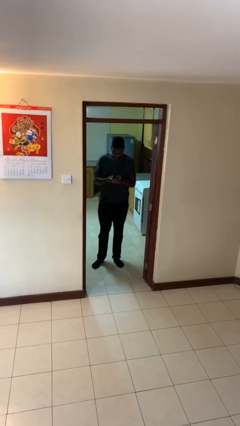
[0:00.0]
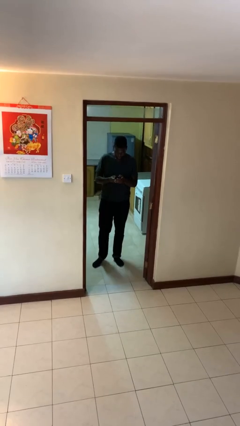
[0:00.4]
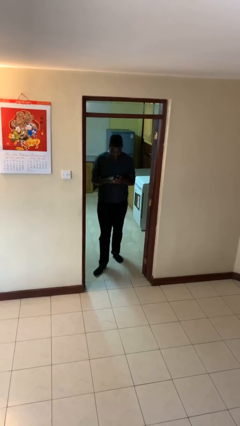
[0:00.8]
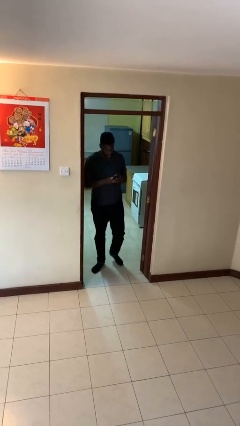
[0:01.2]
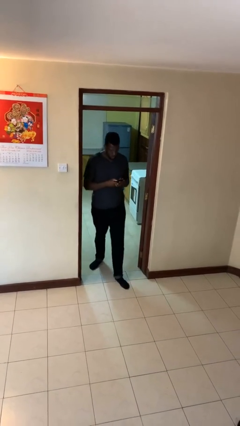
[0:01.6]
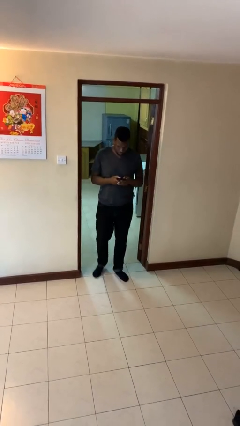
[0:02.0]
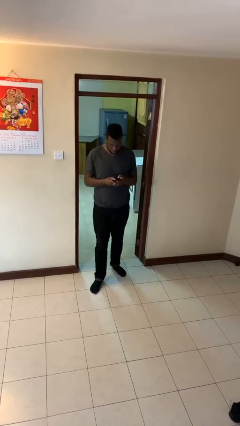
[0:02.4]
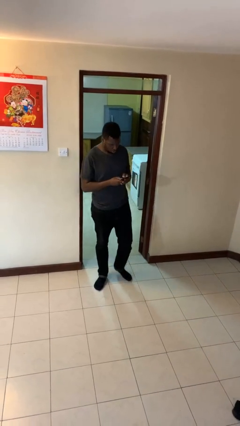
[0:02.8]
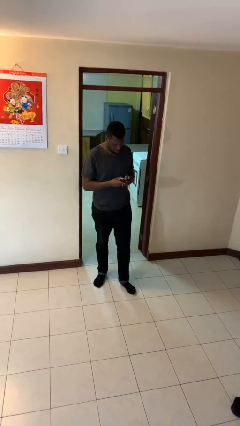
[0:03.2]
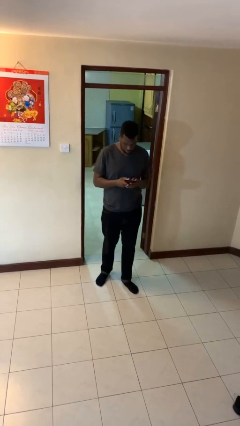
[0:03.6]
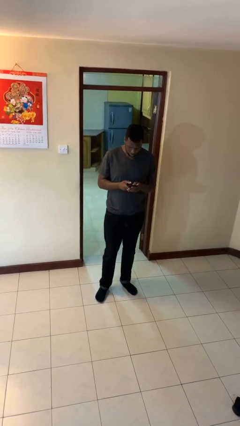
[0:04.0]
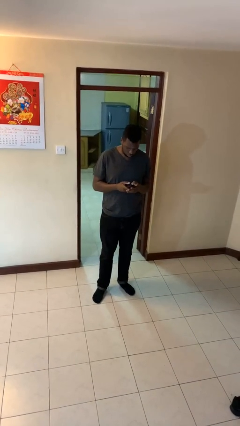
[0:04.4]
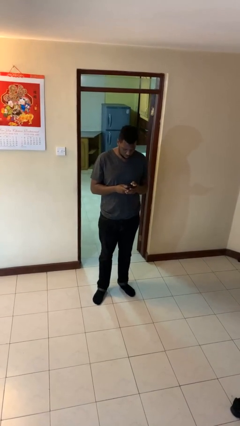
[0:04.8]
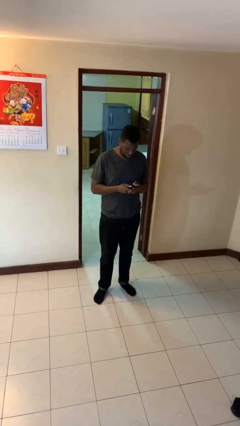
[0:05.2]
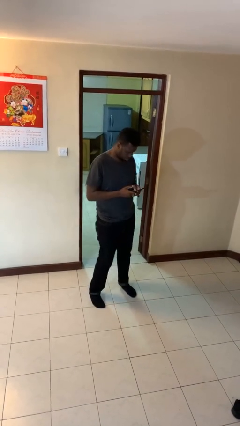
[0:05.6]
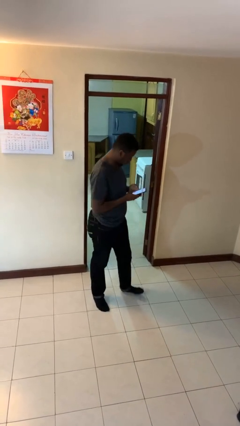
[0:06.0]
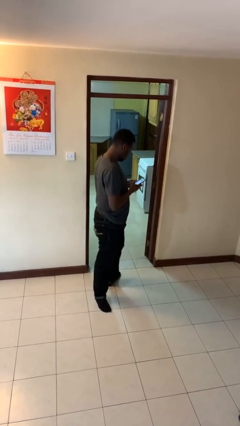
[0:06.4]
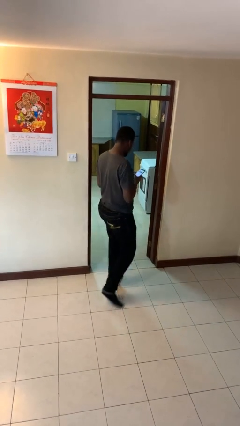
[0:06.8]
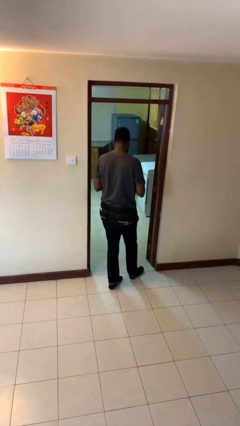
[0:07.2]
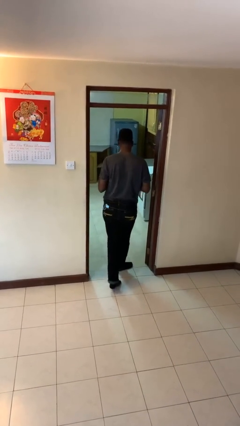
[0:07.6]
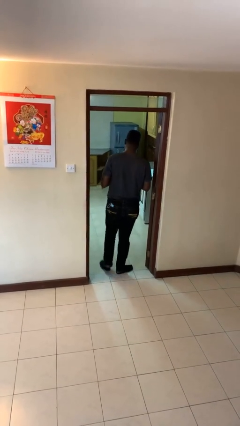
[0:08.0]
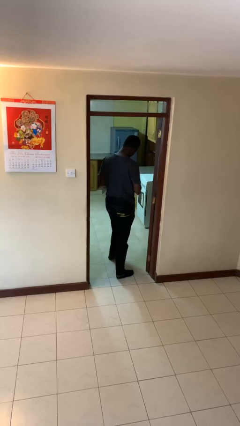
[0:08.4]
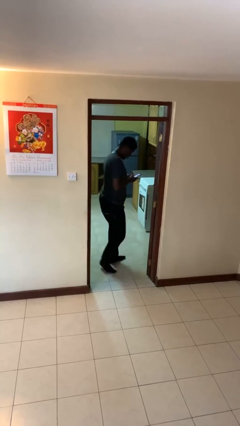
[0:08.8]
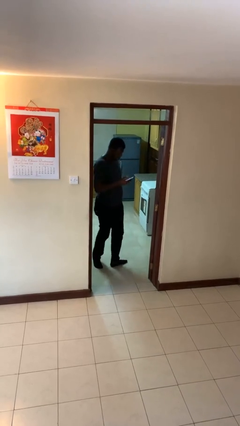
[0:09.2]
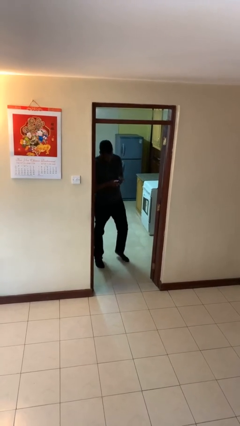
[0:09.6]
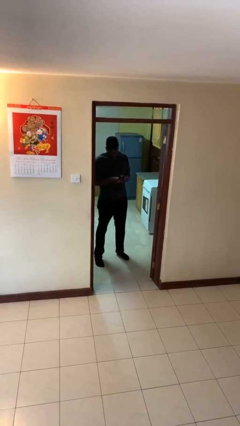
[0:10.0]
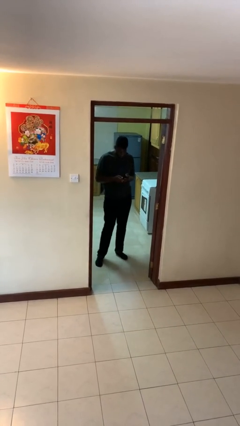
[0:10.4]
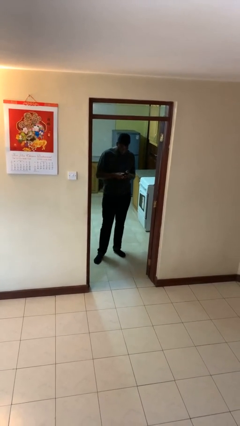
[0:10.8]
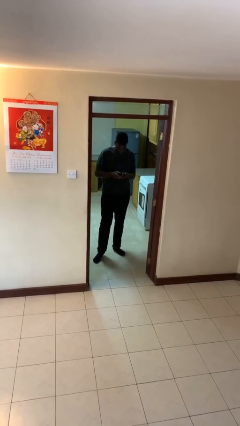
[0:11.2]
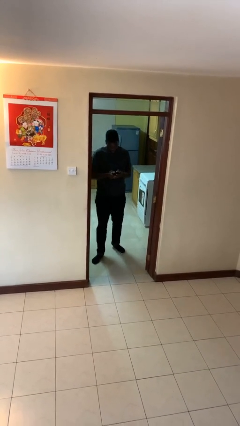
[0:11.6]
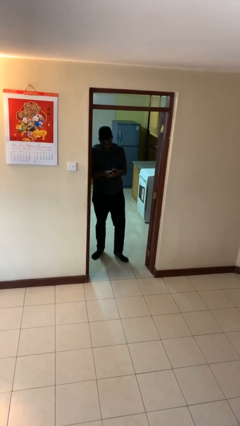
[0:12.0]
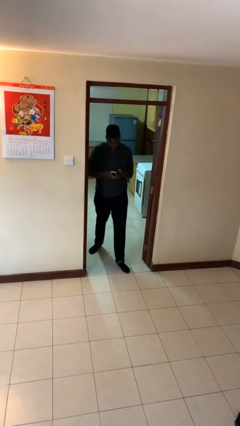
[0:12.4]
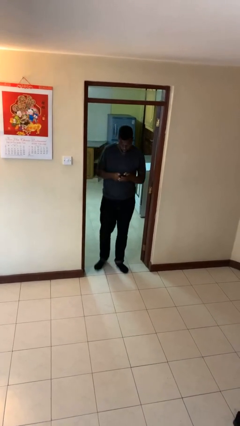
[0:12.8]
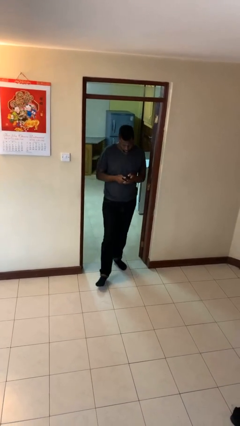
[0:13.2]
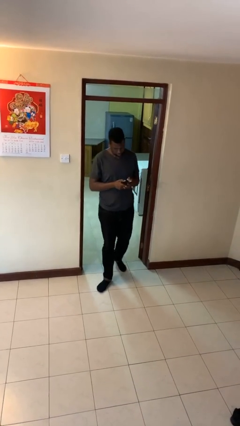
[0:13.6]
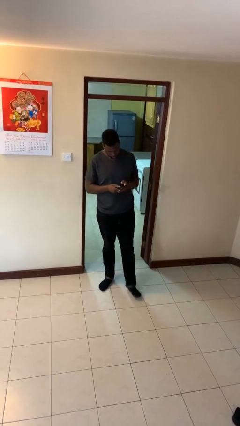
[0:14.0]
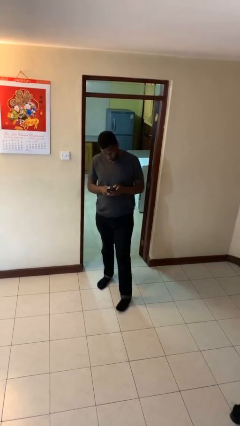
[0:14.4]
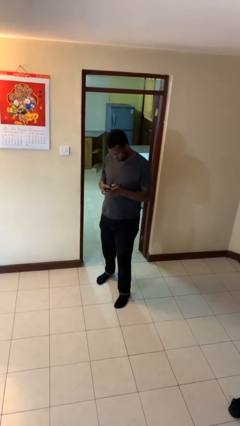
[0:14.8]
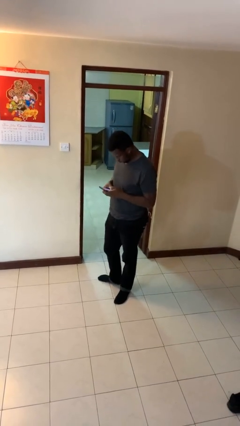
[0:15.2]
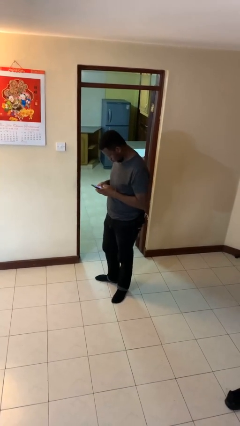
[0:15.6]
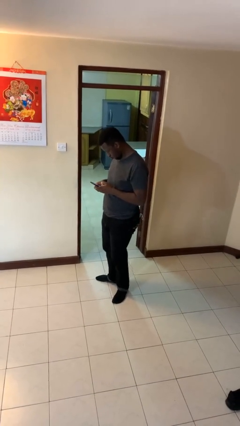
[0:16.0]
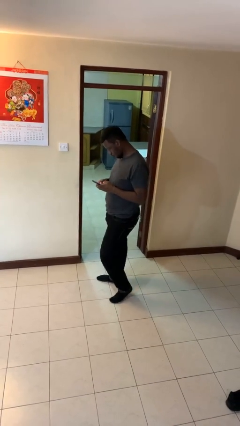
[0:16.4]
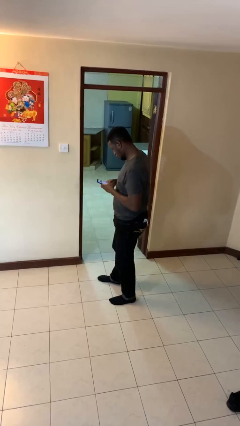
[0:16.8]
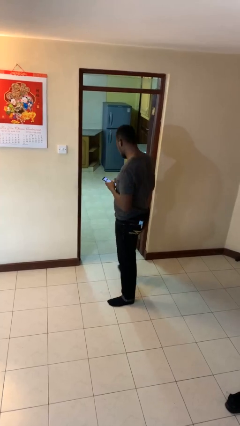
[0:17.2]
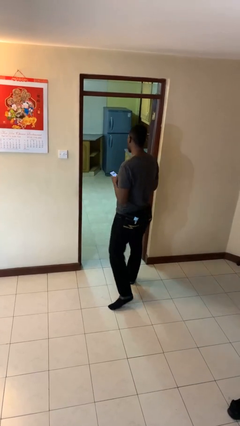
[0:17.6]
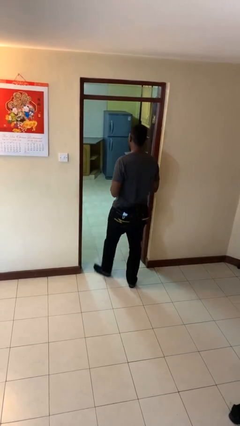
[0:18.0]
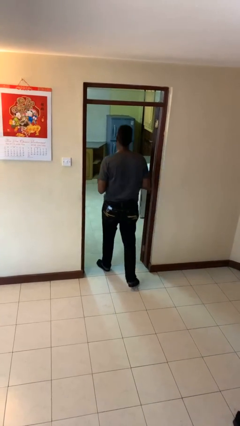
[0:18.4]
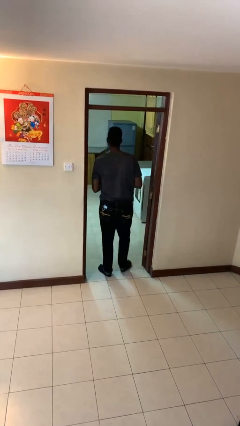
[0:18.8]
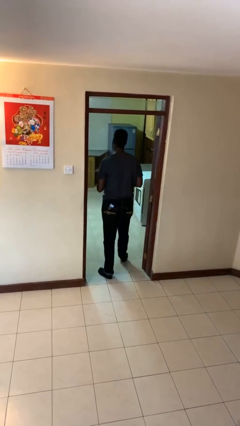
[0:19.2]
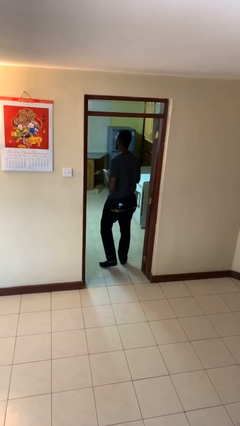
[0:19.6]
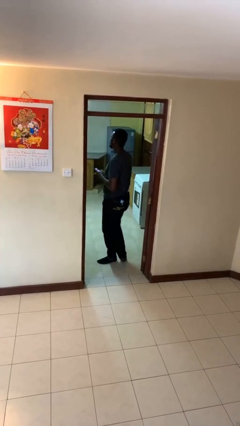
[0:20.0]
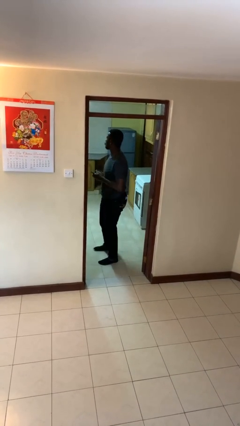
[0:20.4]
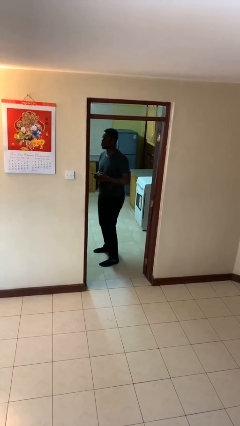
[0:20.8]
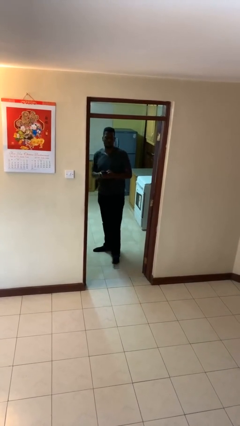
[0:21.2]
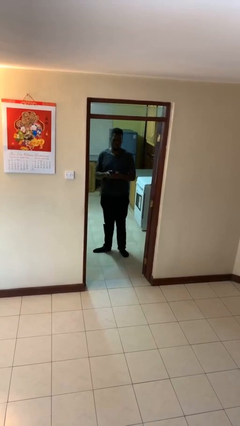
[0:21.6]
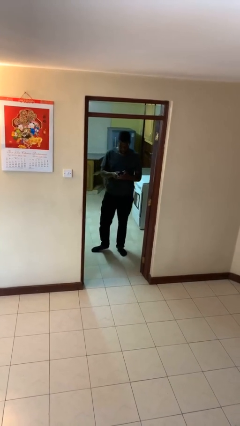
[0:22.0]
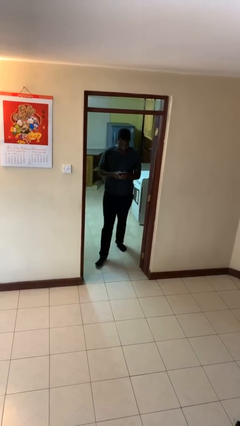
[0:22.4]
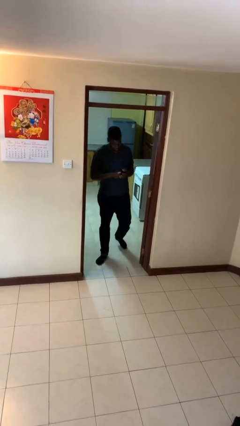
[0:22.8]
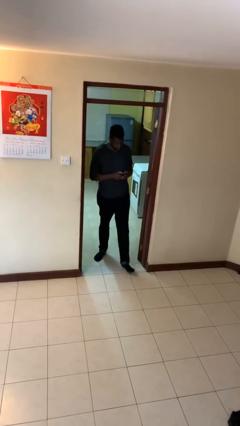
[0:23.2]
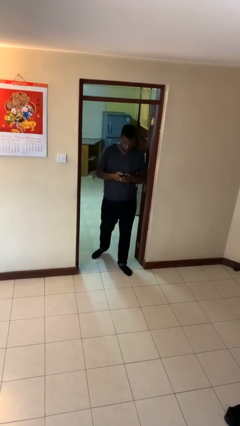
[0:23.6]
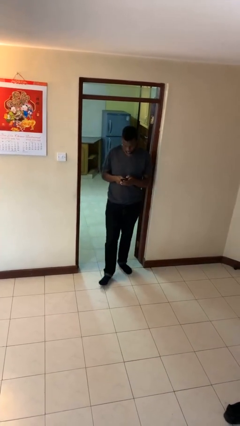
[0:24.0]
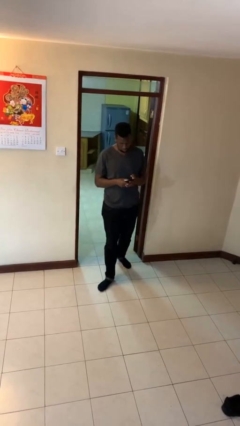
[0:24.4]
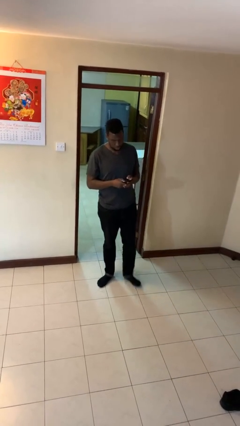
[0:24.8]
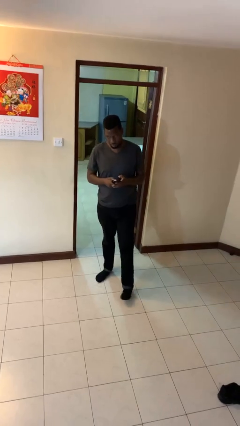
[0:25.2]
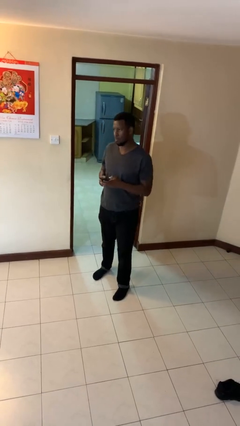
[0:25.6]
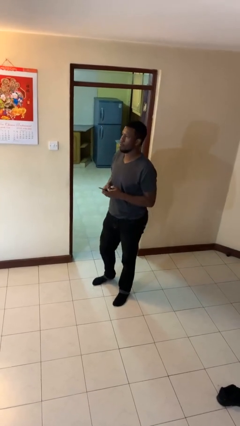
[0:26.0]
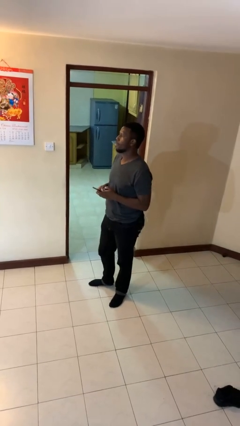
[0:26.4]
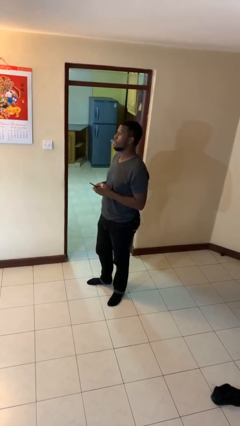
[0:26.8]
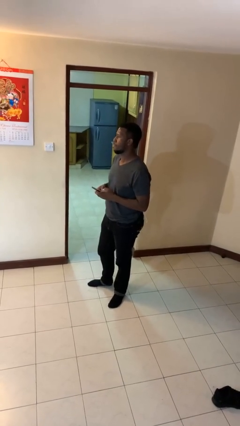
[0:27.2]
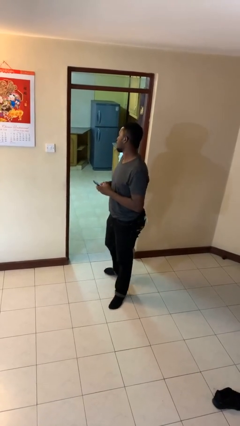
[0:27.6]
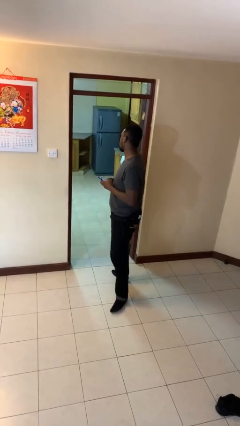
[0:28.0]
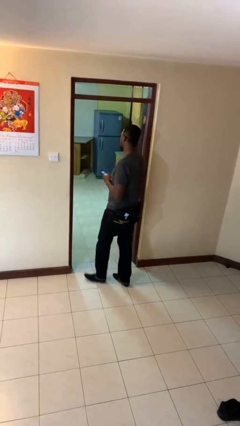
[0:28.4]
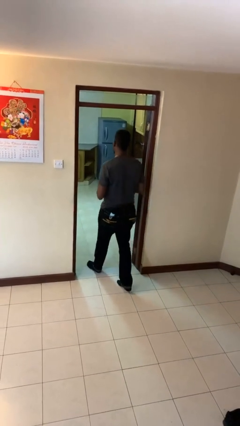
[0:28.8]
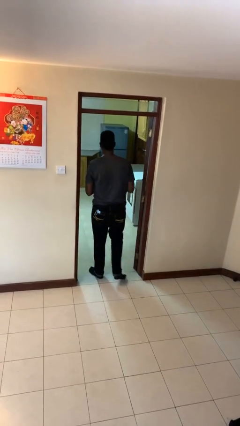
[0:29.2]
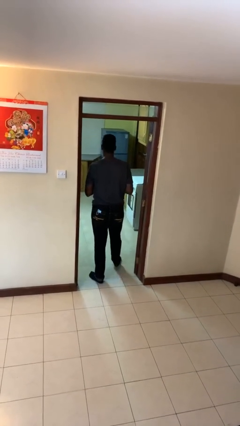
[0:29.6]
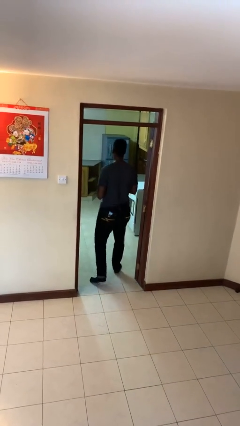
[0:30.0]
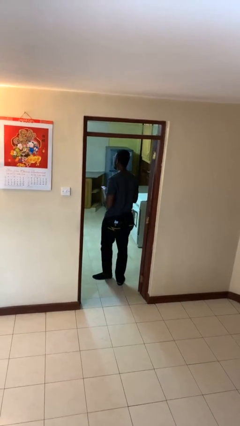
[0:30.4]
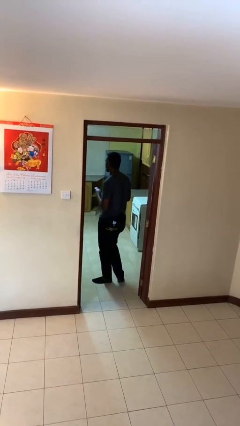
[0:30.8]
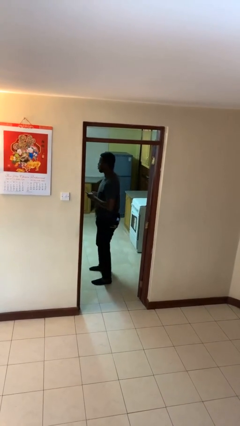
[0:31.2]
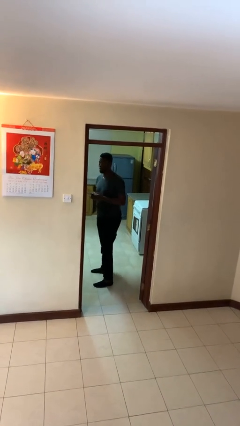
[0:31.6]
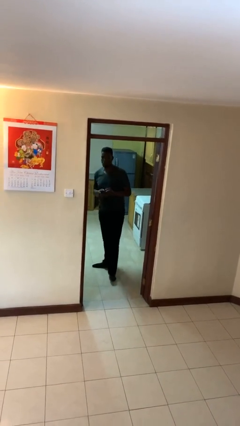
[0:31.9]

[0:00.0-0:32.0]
person texts on phone

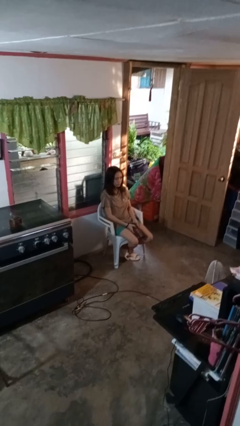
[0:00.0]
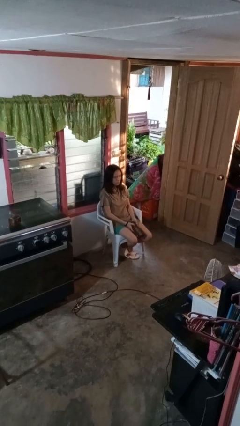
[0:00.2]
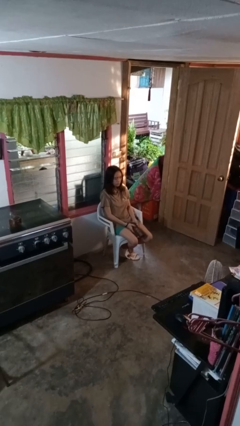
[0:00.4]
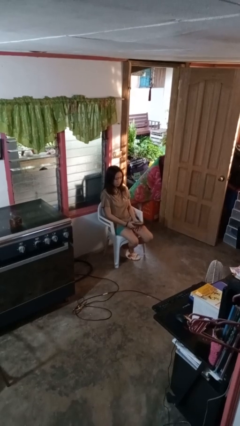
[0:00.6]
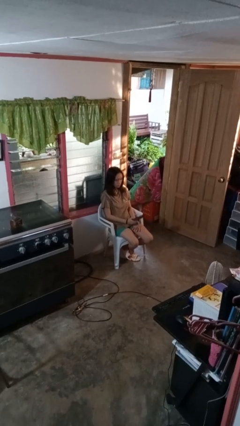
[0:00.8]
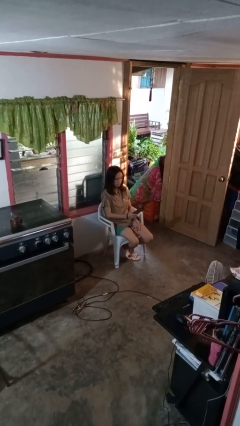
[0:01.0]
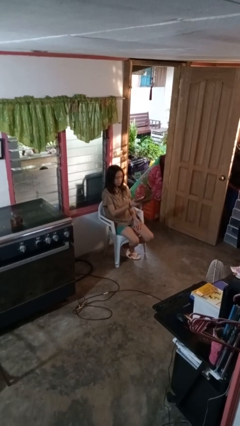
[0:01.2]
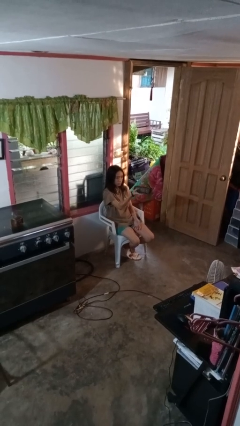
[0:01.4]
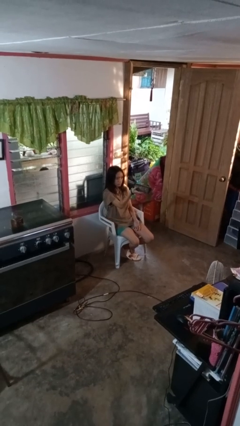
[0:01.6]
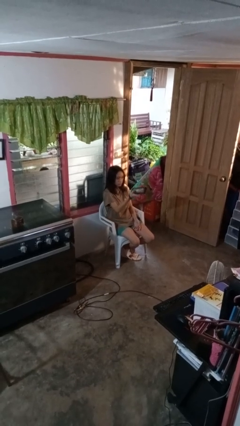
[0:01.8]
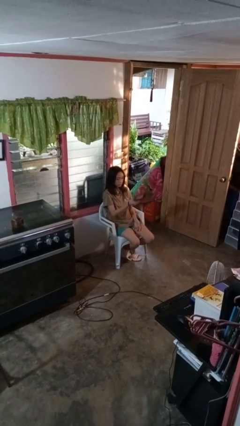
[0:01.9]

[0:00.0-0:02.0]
person uses television remote
